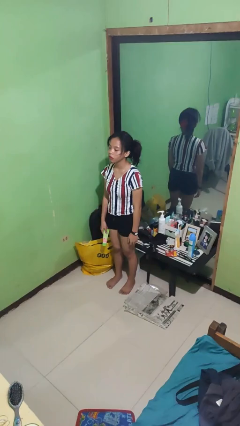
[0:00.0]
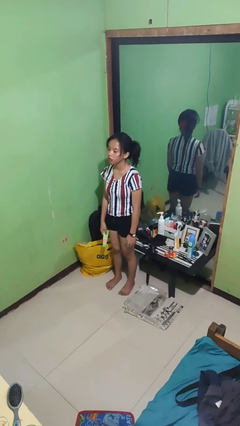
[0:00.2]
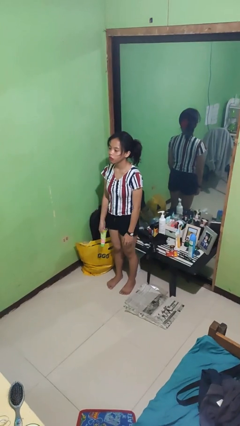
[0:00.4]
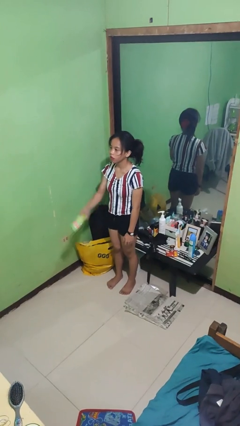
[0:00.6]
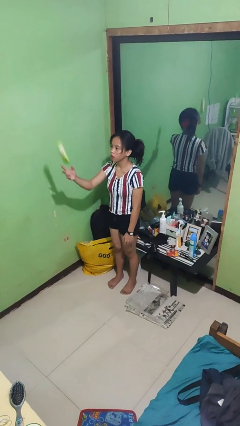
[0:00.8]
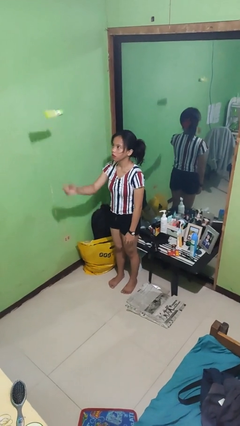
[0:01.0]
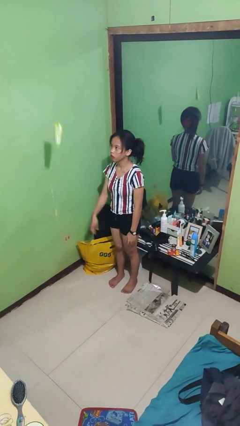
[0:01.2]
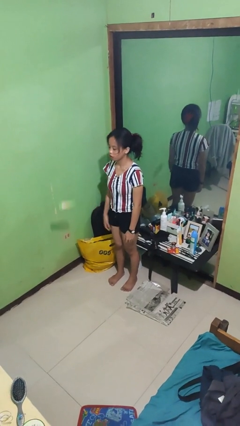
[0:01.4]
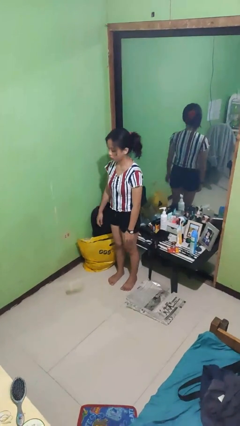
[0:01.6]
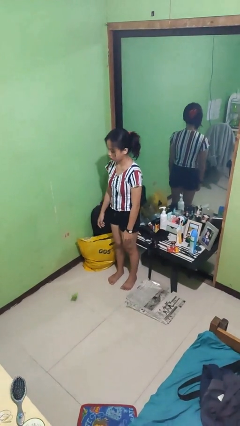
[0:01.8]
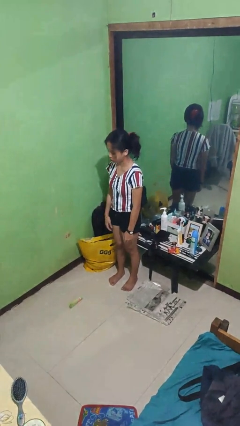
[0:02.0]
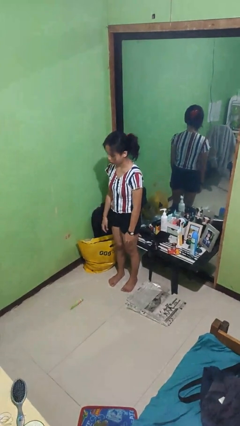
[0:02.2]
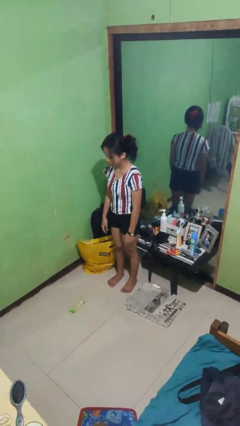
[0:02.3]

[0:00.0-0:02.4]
person throws object into air

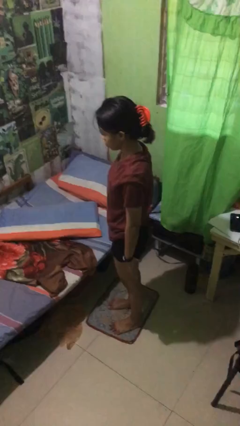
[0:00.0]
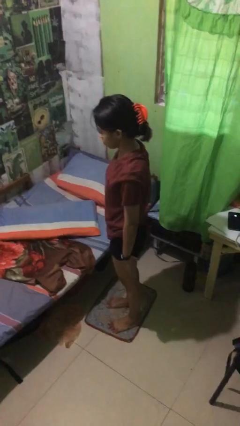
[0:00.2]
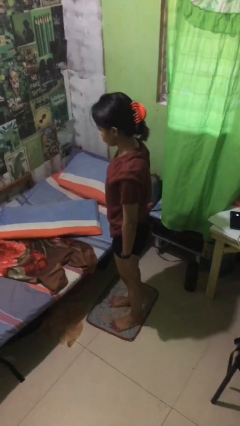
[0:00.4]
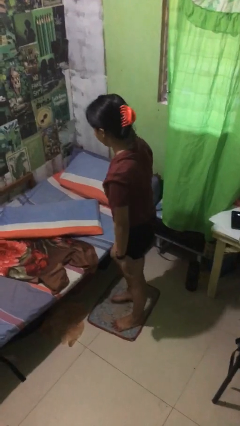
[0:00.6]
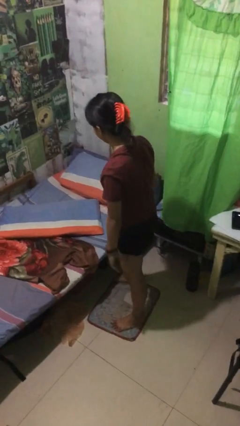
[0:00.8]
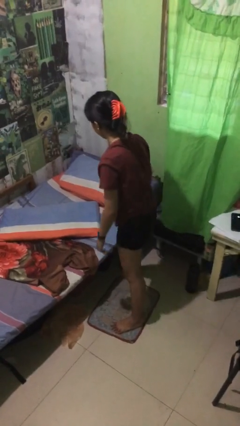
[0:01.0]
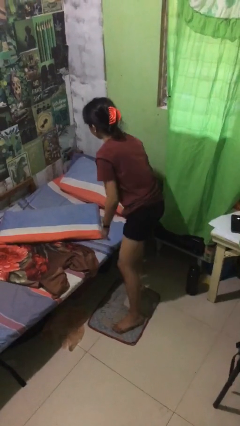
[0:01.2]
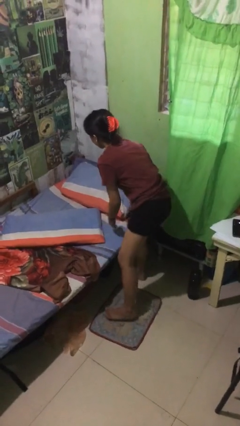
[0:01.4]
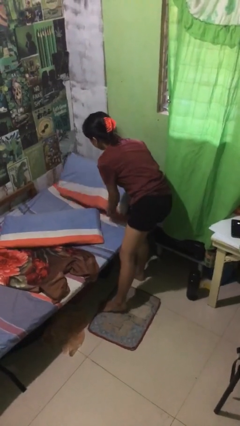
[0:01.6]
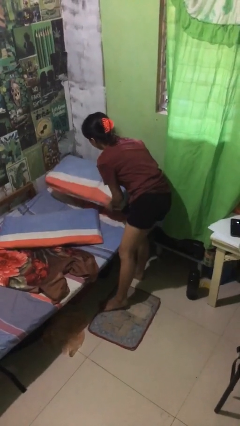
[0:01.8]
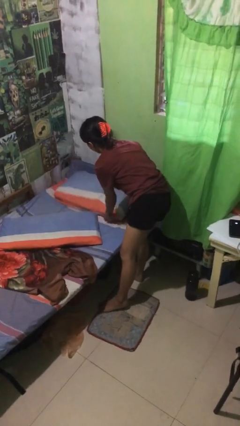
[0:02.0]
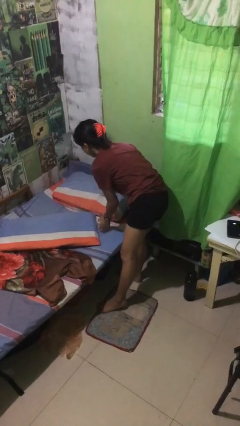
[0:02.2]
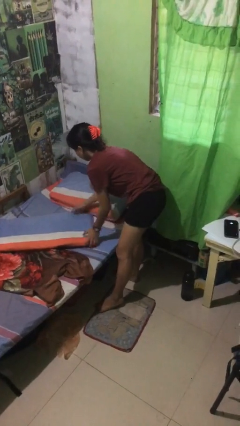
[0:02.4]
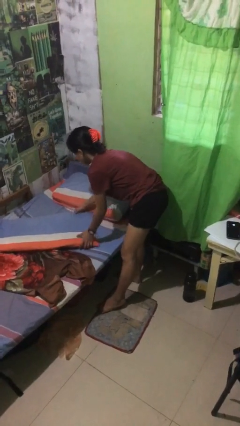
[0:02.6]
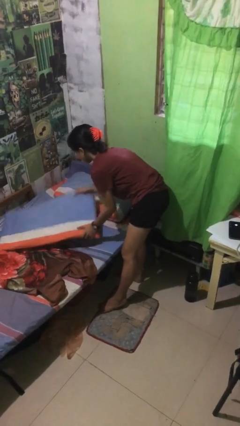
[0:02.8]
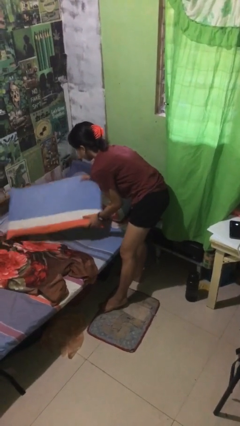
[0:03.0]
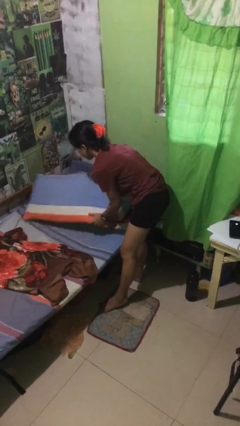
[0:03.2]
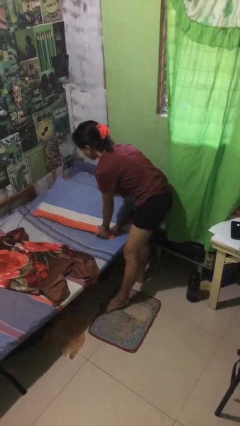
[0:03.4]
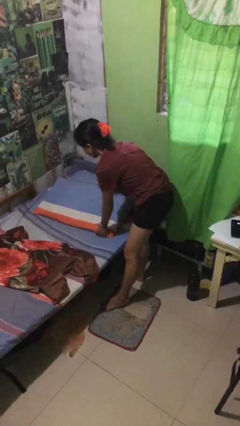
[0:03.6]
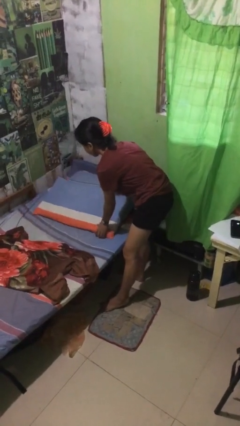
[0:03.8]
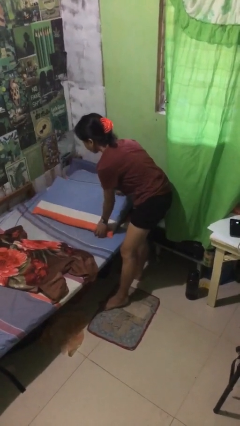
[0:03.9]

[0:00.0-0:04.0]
person makes bed

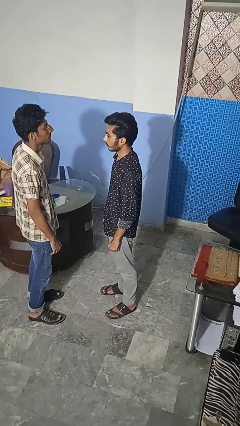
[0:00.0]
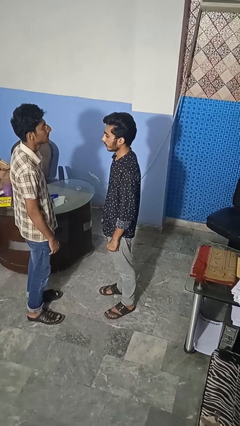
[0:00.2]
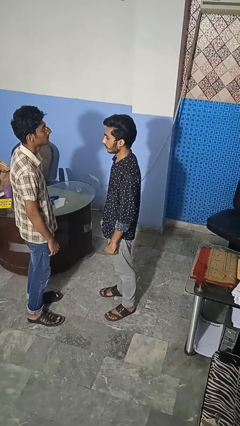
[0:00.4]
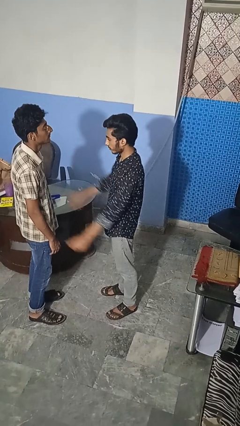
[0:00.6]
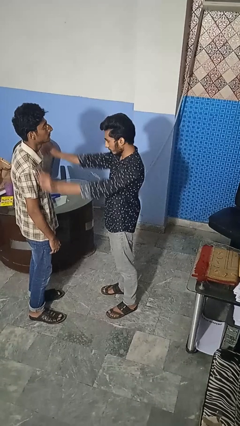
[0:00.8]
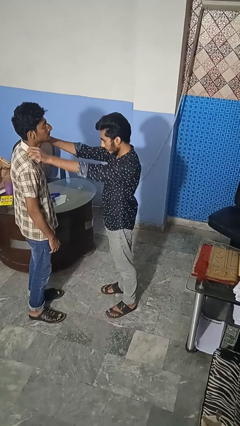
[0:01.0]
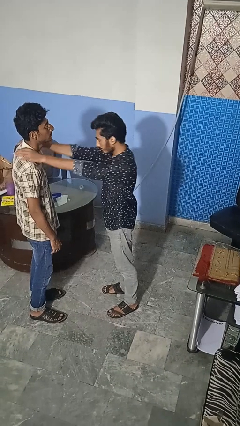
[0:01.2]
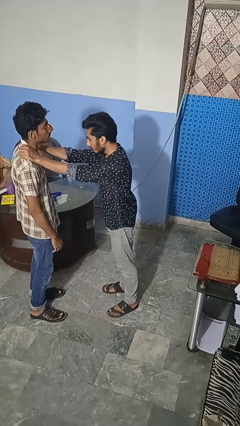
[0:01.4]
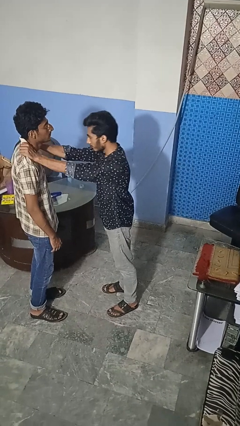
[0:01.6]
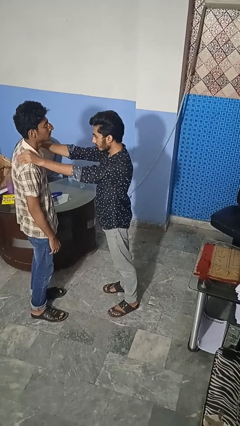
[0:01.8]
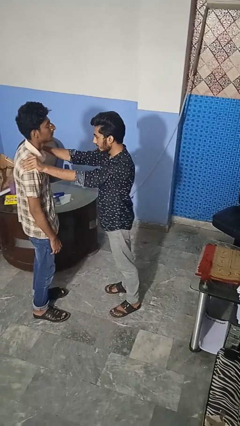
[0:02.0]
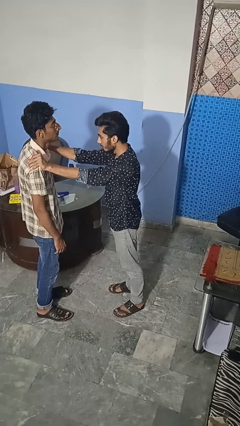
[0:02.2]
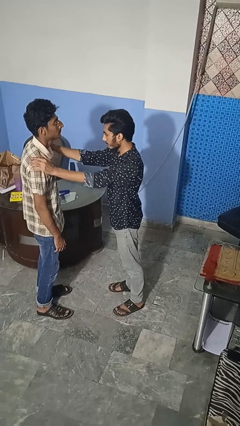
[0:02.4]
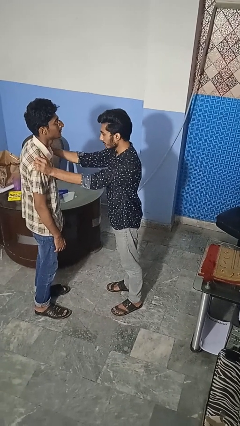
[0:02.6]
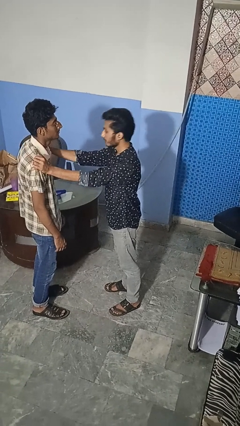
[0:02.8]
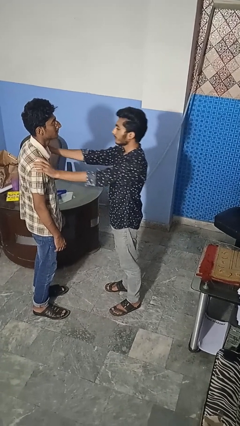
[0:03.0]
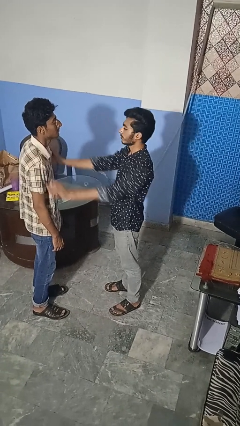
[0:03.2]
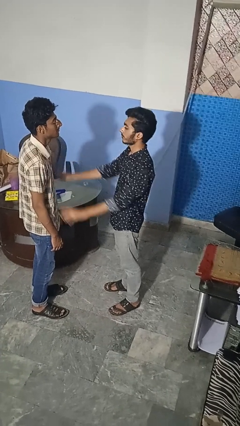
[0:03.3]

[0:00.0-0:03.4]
person pounds shoulders of person

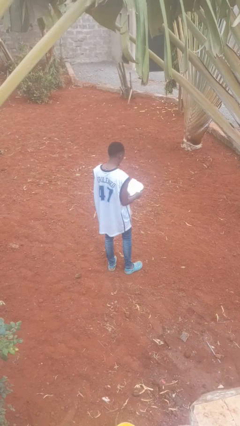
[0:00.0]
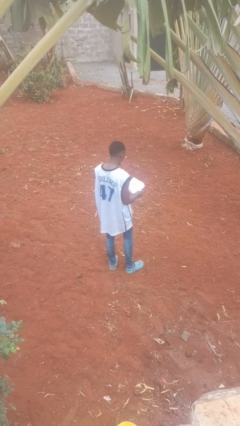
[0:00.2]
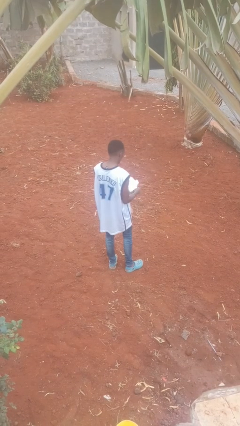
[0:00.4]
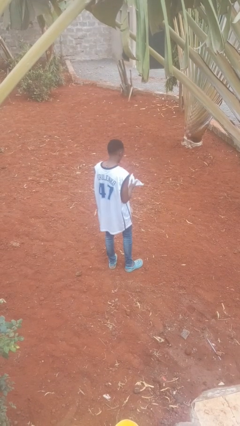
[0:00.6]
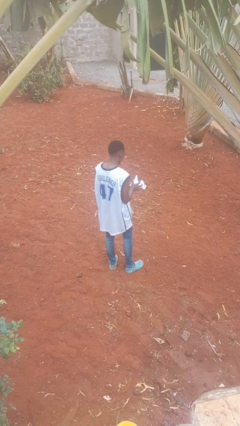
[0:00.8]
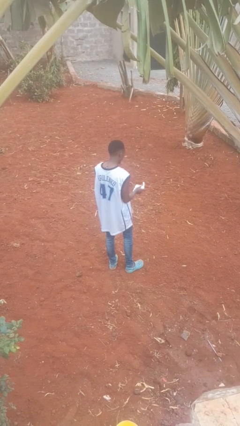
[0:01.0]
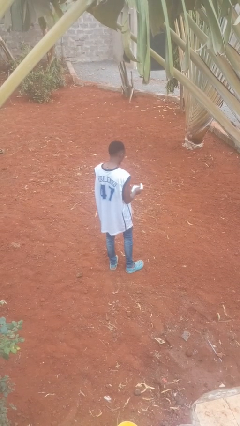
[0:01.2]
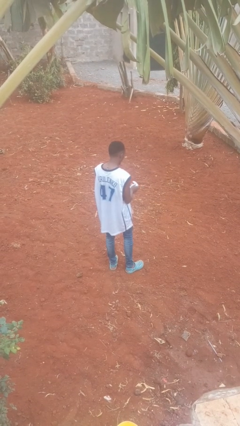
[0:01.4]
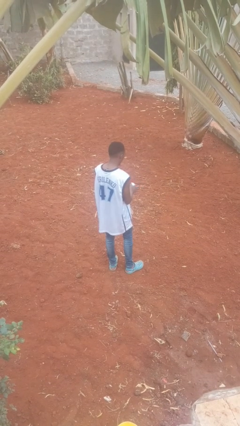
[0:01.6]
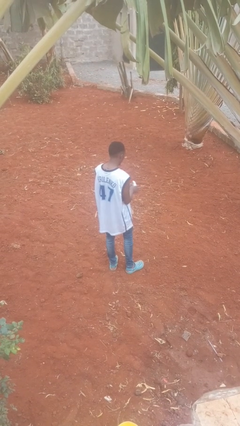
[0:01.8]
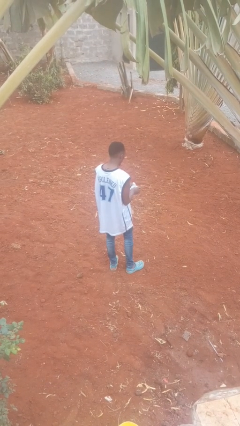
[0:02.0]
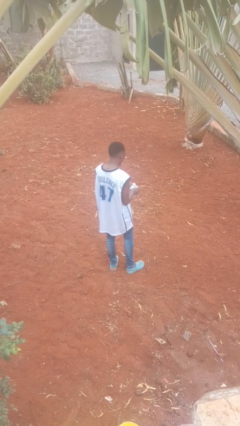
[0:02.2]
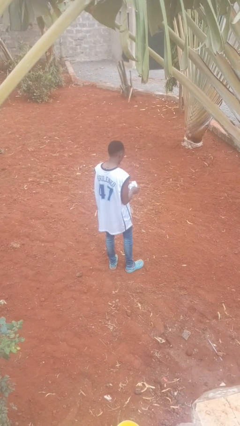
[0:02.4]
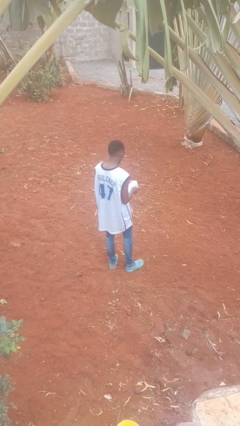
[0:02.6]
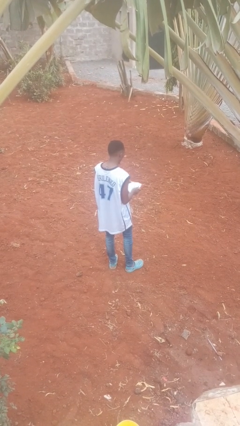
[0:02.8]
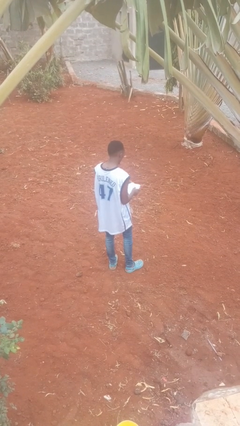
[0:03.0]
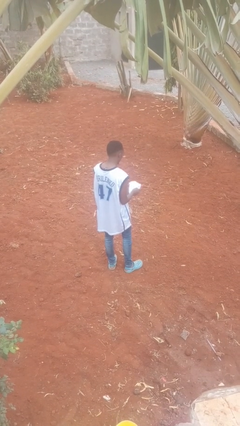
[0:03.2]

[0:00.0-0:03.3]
person crumples paper

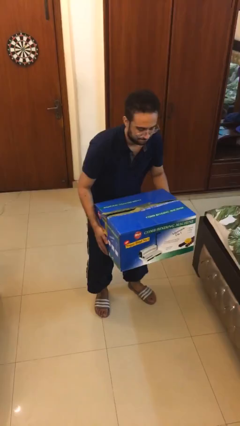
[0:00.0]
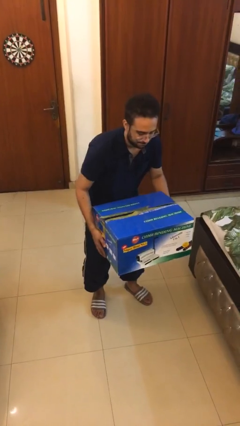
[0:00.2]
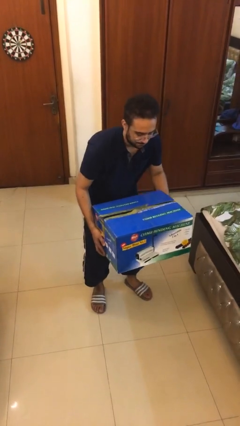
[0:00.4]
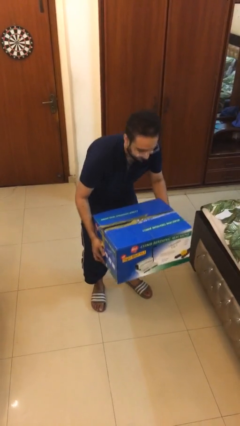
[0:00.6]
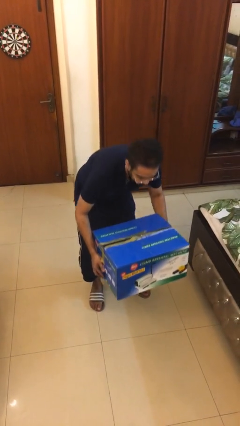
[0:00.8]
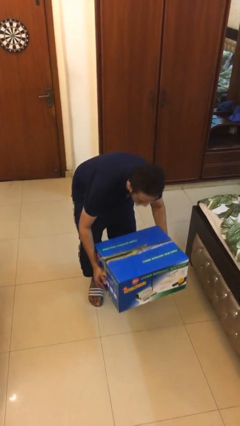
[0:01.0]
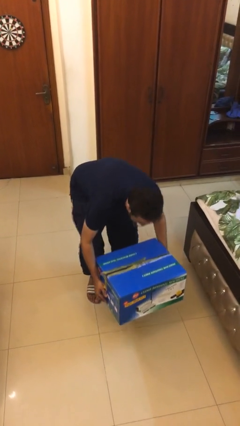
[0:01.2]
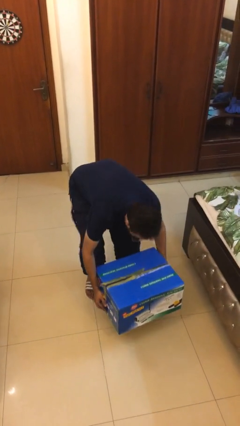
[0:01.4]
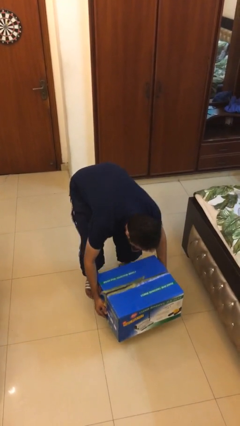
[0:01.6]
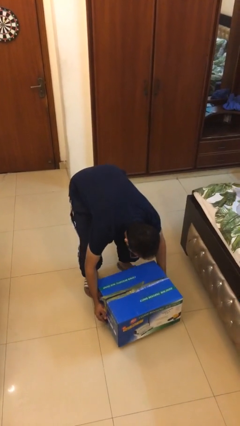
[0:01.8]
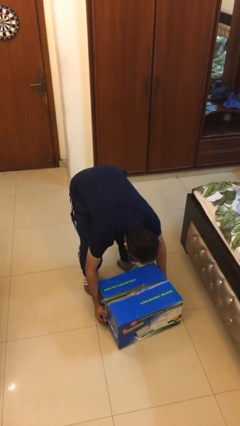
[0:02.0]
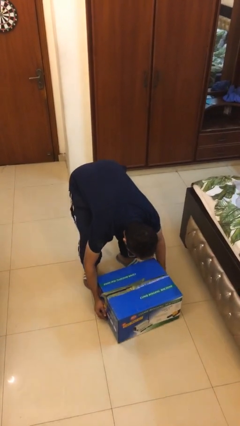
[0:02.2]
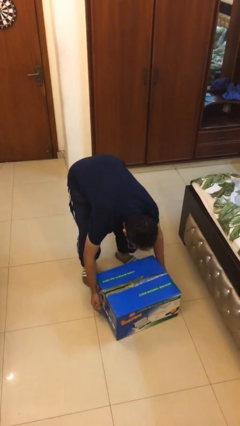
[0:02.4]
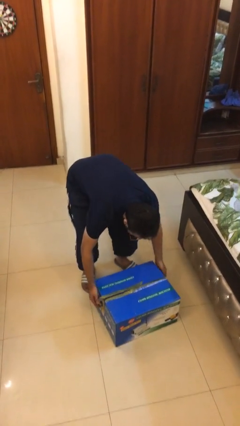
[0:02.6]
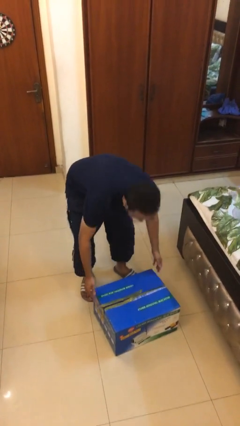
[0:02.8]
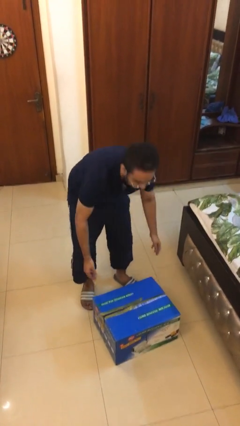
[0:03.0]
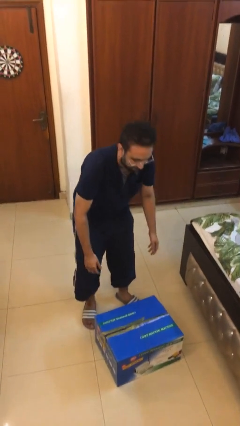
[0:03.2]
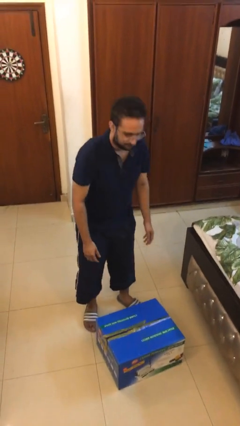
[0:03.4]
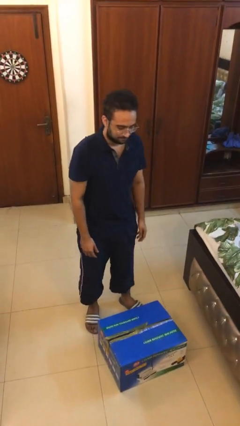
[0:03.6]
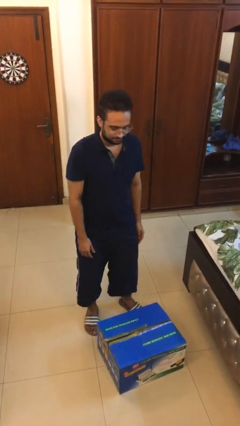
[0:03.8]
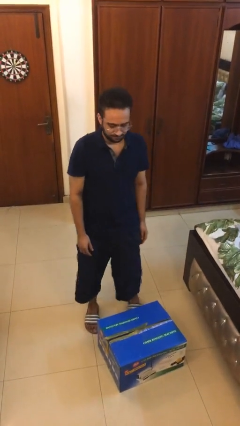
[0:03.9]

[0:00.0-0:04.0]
person puts down object on floor

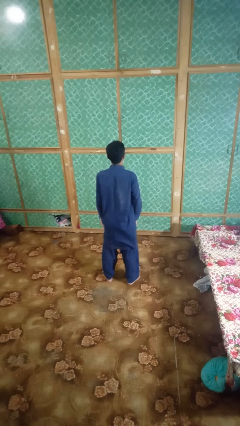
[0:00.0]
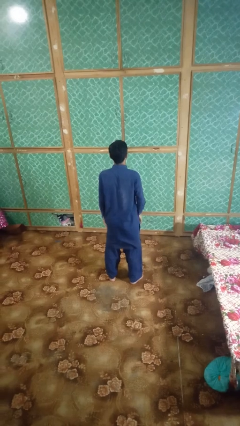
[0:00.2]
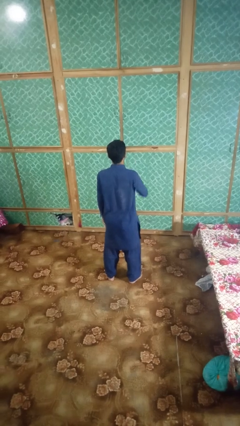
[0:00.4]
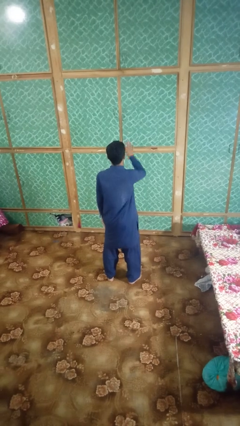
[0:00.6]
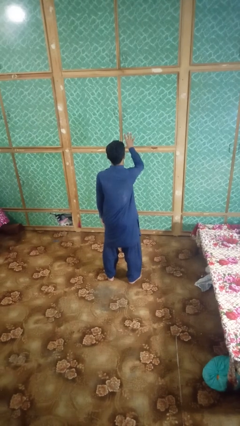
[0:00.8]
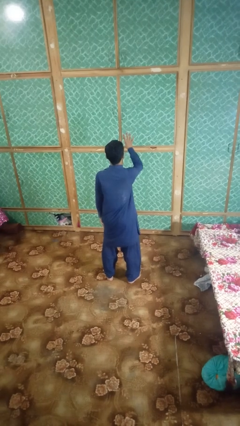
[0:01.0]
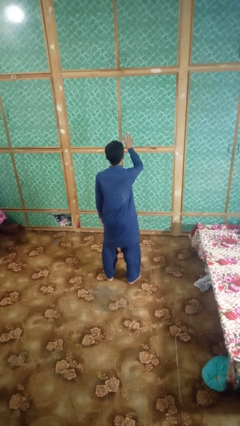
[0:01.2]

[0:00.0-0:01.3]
person gestures number four
